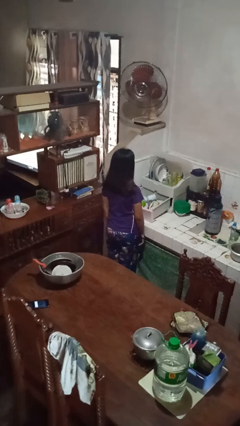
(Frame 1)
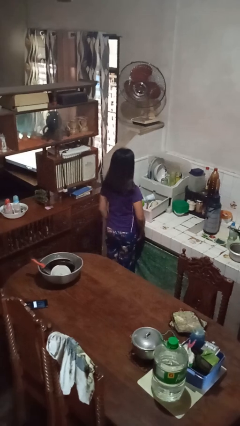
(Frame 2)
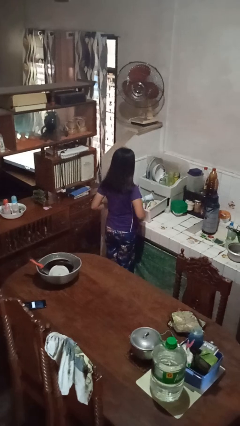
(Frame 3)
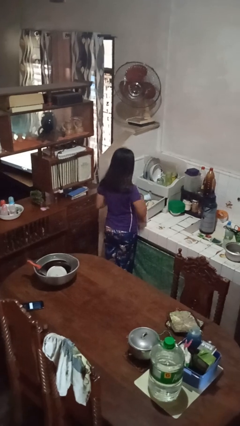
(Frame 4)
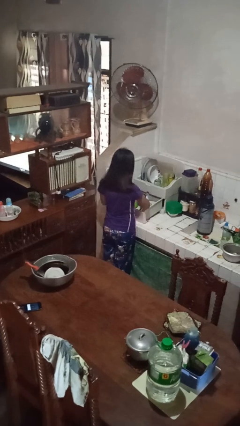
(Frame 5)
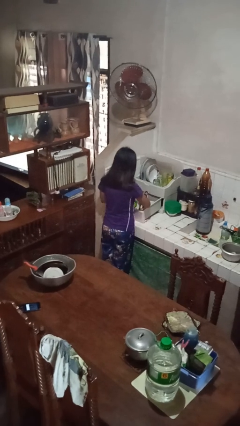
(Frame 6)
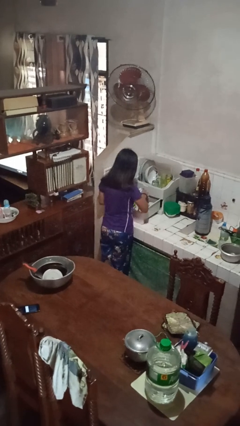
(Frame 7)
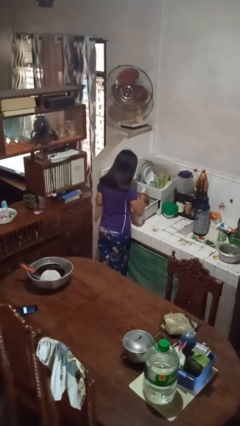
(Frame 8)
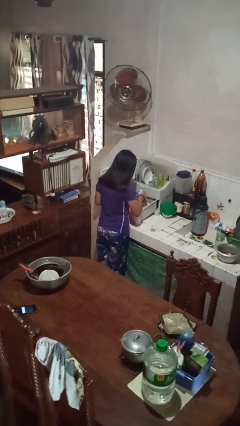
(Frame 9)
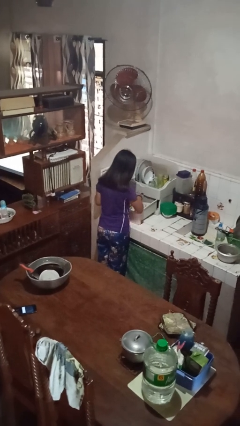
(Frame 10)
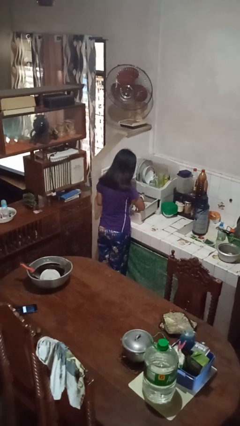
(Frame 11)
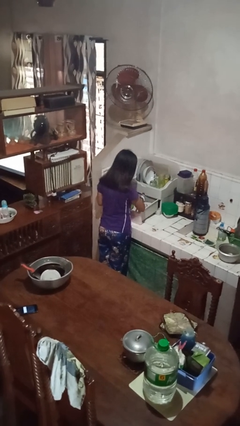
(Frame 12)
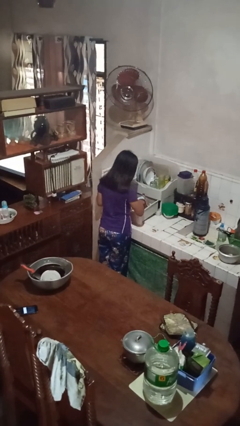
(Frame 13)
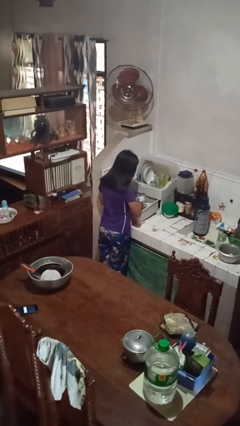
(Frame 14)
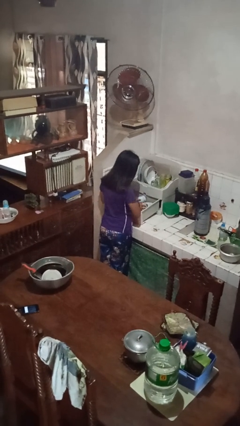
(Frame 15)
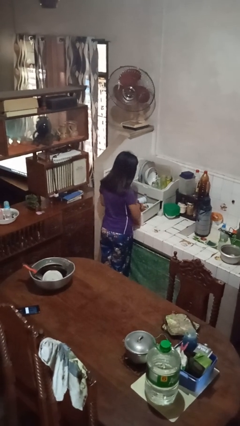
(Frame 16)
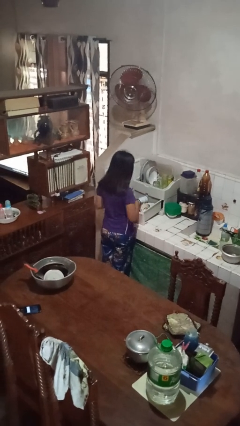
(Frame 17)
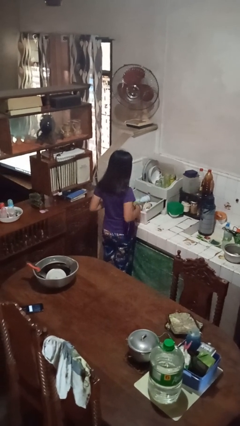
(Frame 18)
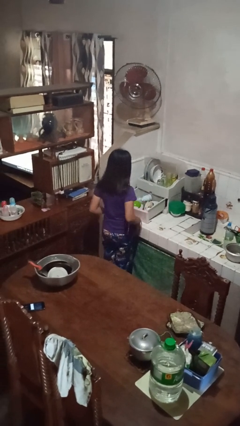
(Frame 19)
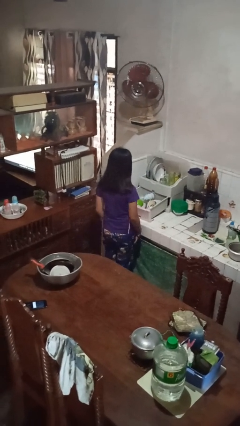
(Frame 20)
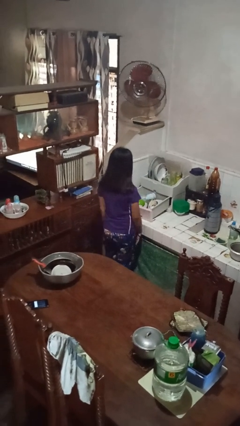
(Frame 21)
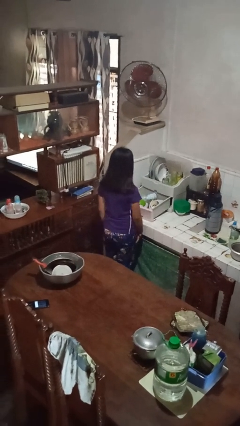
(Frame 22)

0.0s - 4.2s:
person searches in kitchen drawer

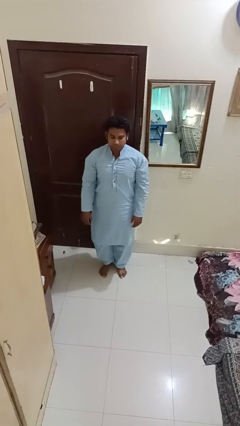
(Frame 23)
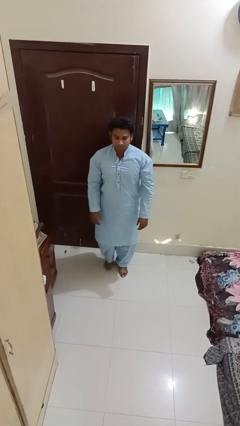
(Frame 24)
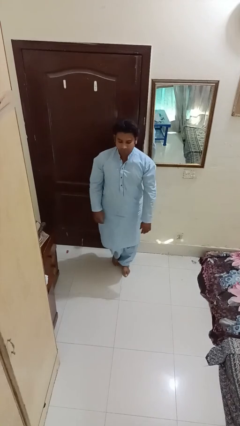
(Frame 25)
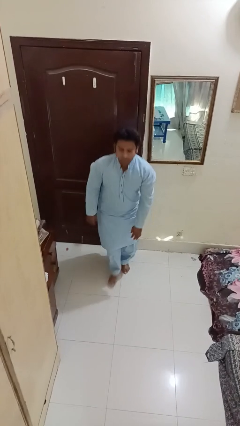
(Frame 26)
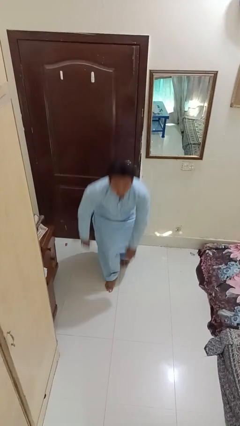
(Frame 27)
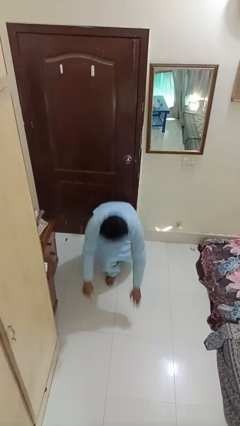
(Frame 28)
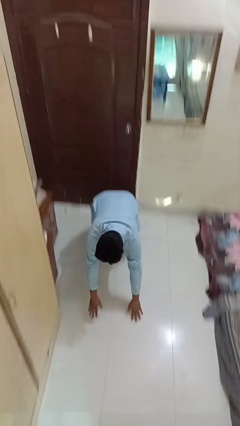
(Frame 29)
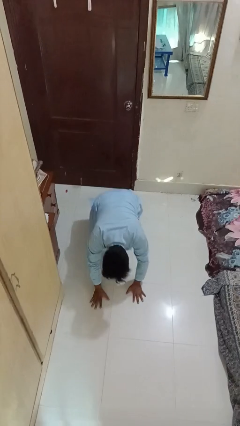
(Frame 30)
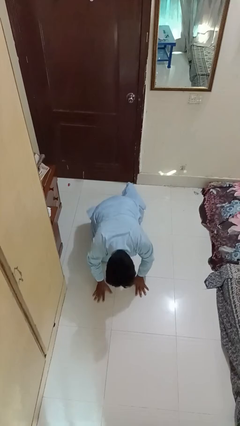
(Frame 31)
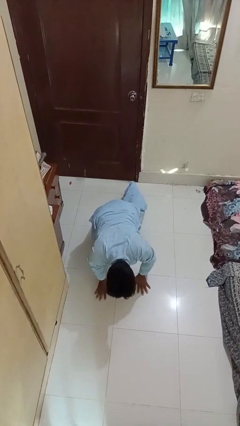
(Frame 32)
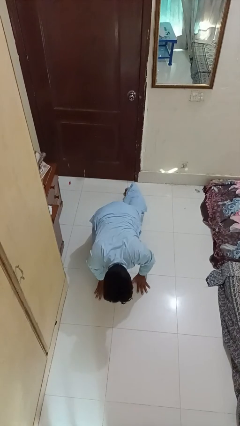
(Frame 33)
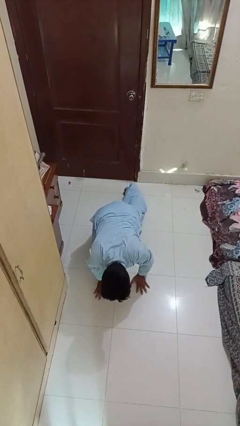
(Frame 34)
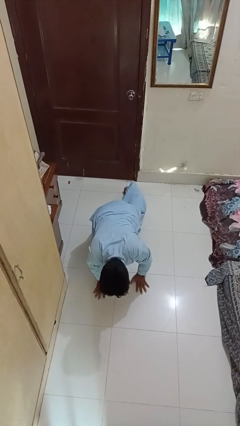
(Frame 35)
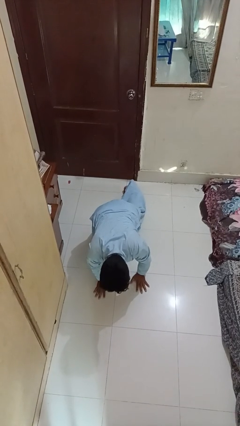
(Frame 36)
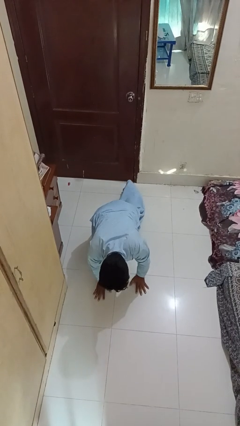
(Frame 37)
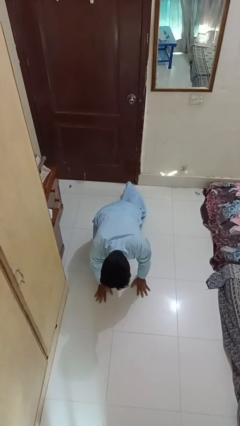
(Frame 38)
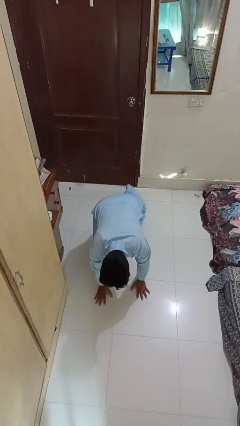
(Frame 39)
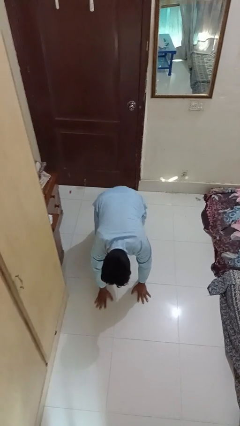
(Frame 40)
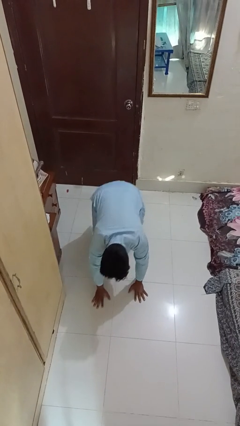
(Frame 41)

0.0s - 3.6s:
person trips on object on floor

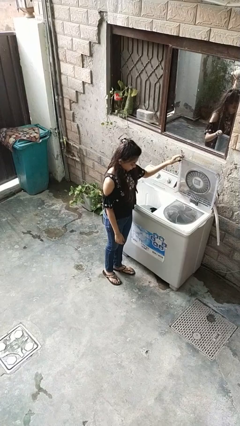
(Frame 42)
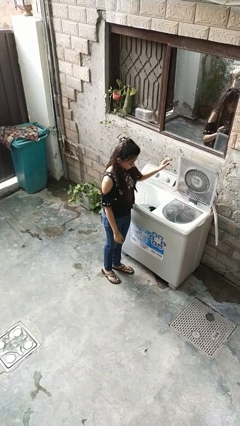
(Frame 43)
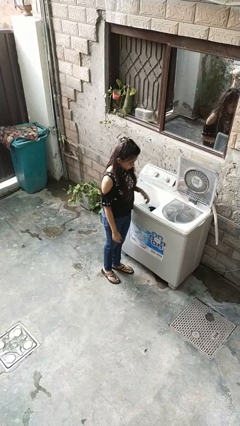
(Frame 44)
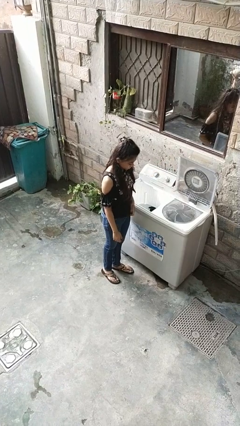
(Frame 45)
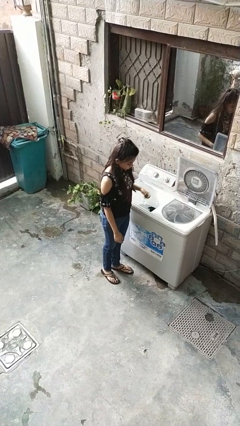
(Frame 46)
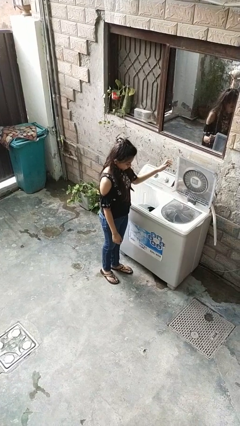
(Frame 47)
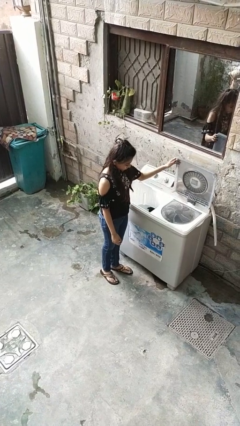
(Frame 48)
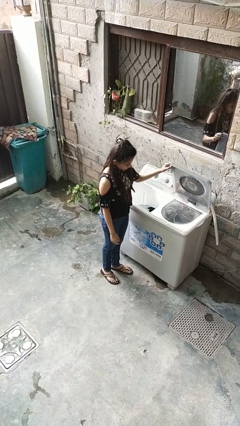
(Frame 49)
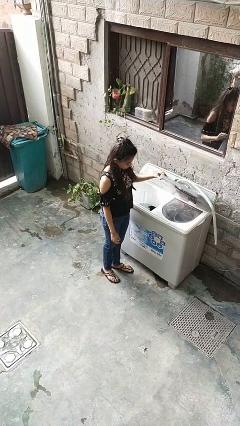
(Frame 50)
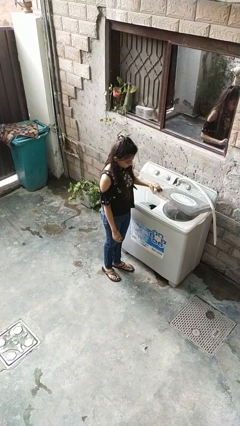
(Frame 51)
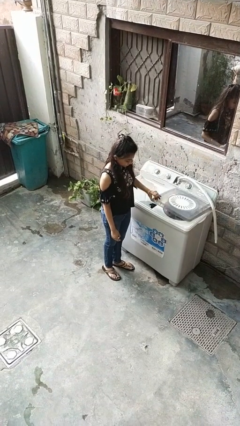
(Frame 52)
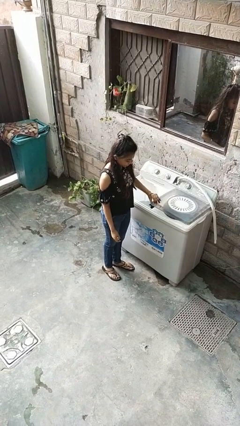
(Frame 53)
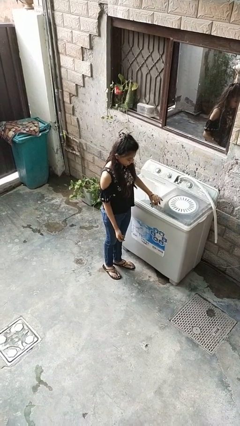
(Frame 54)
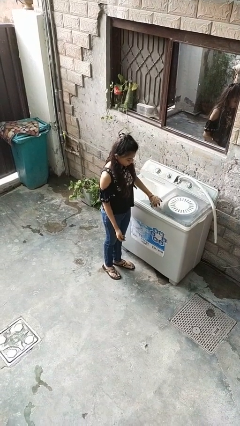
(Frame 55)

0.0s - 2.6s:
person closes clothes washer

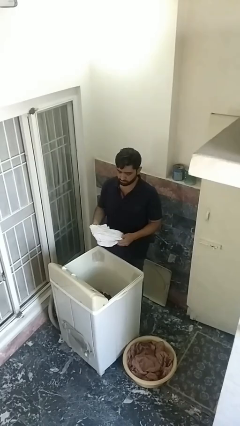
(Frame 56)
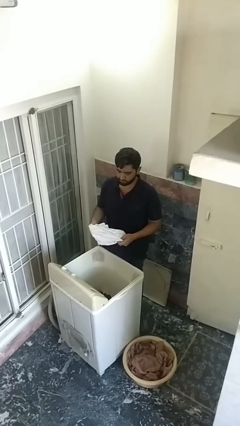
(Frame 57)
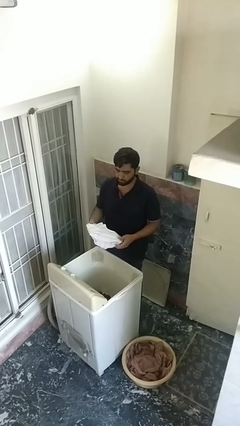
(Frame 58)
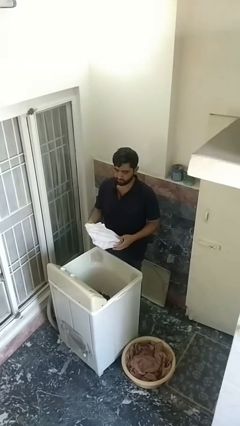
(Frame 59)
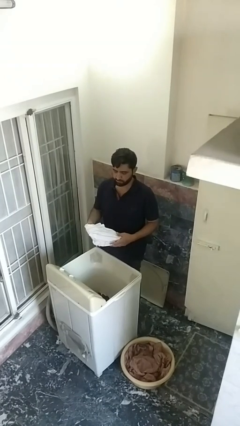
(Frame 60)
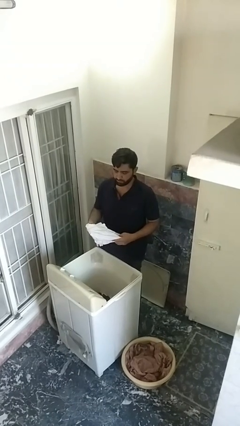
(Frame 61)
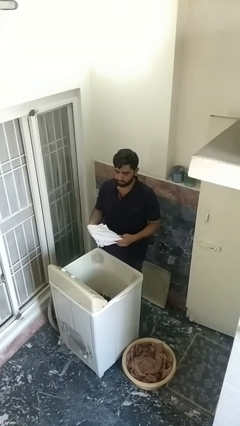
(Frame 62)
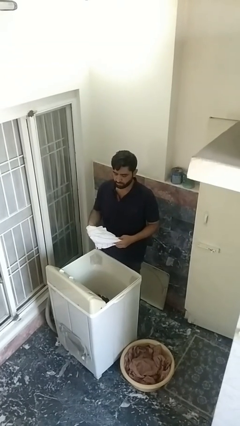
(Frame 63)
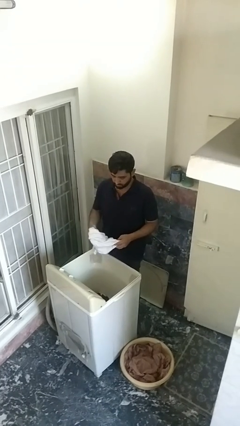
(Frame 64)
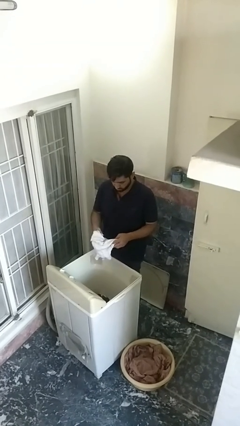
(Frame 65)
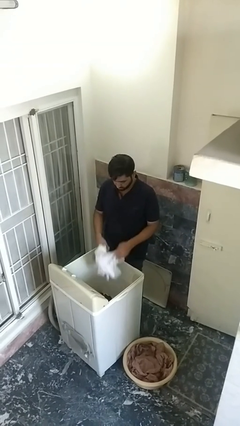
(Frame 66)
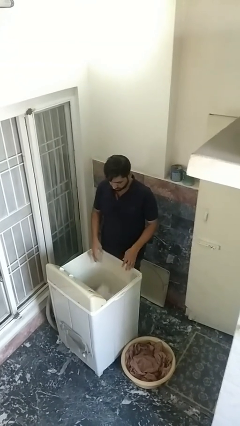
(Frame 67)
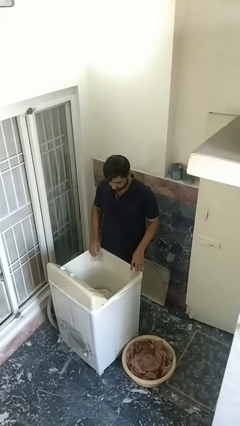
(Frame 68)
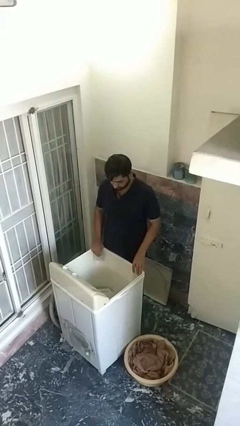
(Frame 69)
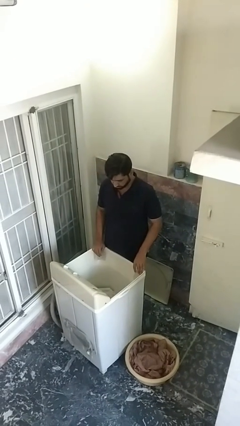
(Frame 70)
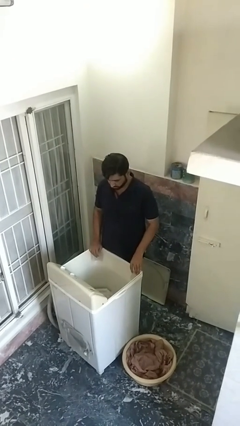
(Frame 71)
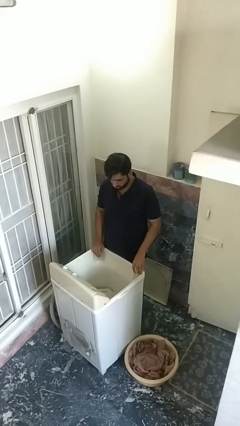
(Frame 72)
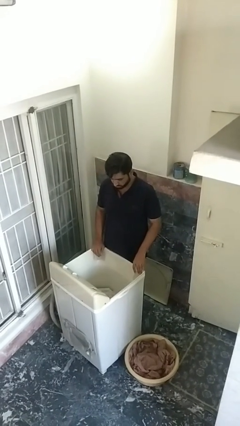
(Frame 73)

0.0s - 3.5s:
person loads clotheswasher

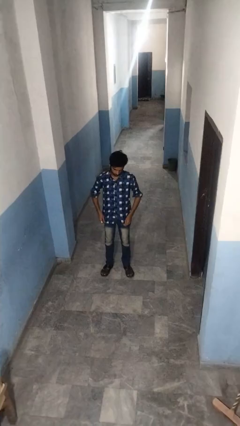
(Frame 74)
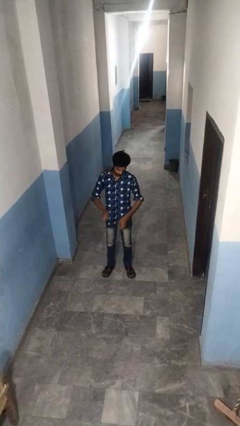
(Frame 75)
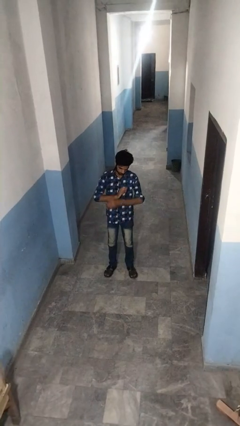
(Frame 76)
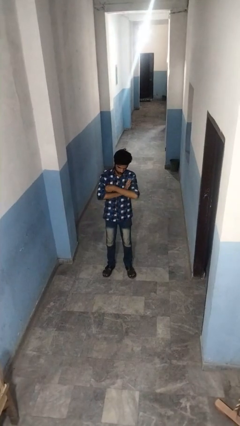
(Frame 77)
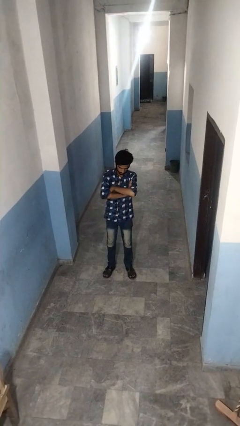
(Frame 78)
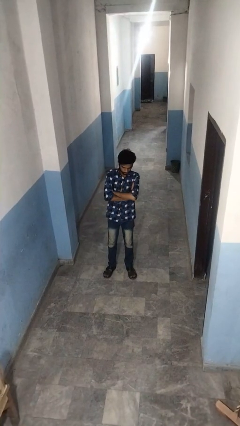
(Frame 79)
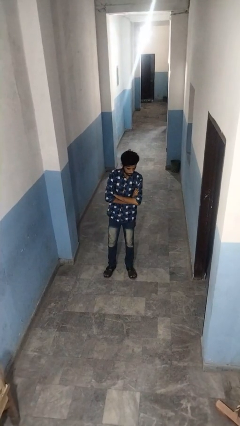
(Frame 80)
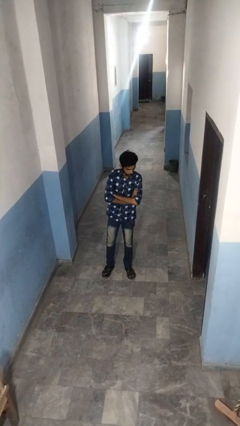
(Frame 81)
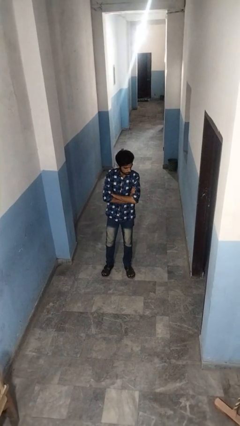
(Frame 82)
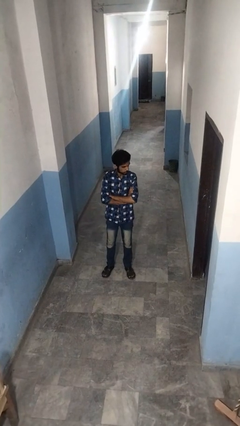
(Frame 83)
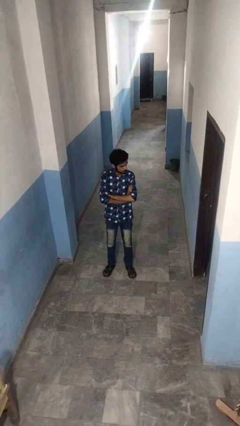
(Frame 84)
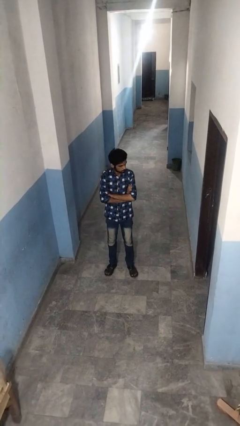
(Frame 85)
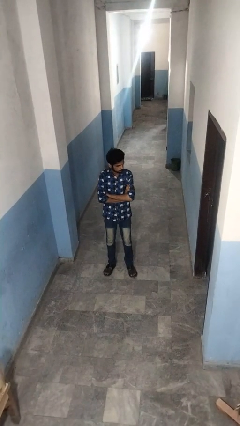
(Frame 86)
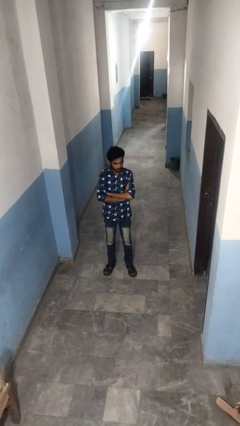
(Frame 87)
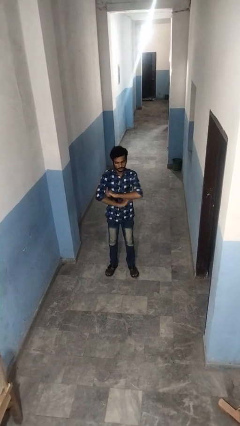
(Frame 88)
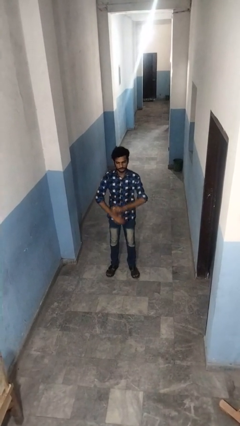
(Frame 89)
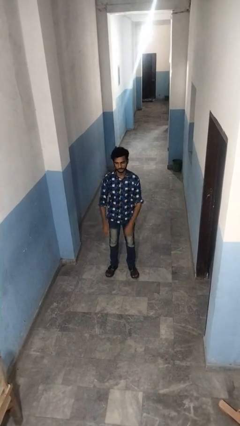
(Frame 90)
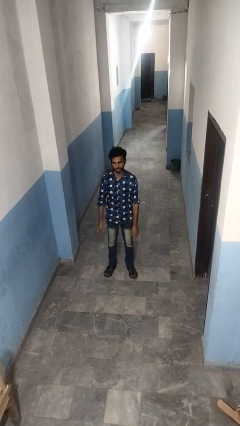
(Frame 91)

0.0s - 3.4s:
person crosses arms

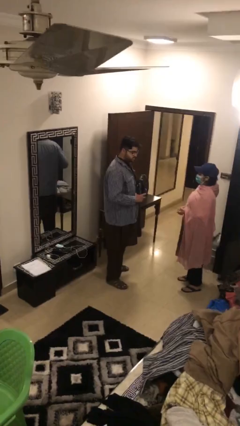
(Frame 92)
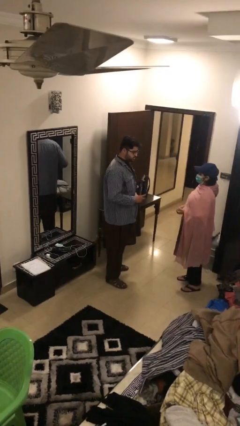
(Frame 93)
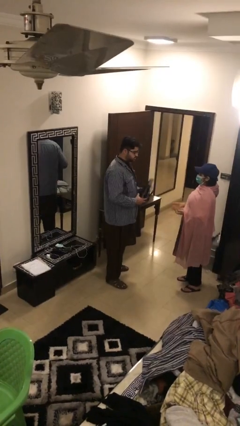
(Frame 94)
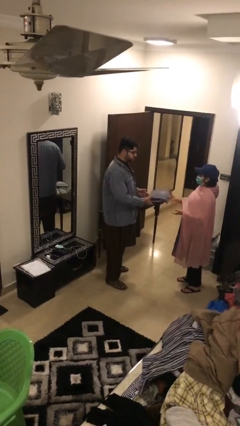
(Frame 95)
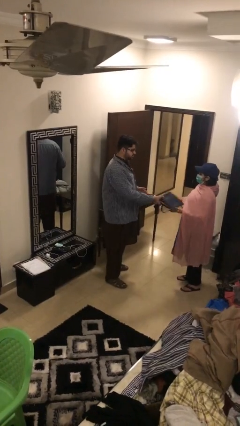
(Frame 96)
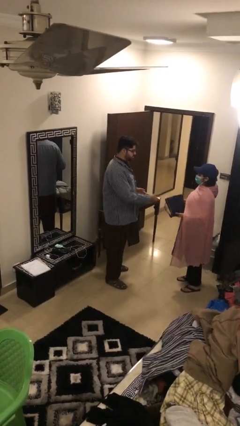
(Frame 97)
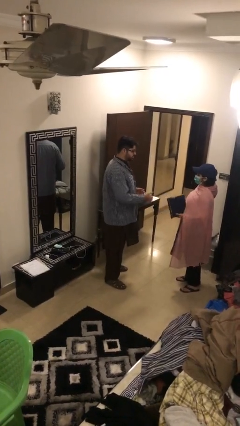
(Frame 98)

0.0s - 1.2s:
person transfers object to person
